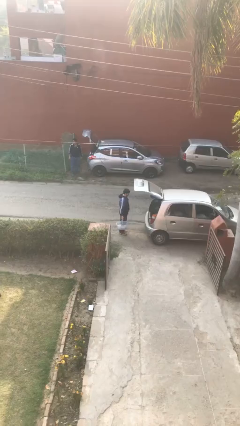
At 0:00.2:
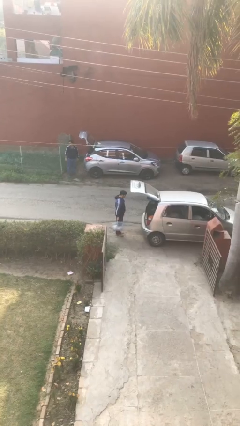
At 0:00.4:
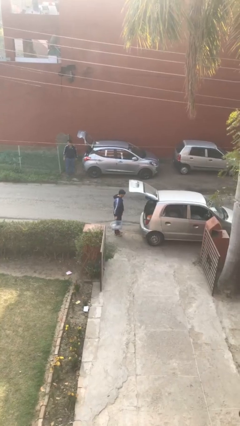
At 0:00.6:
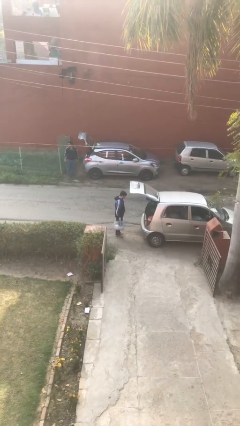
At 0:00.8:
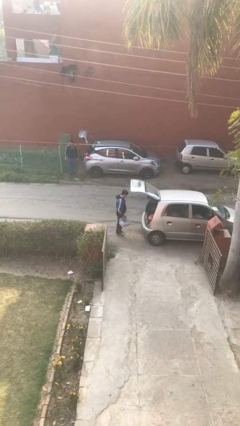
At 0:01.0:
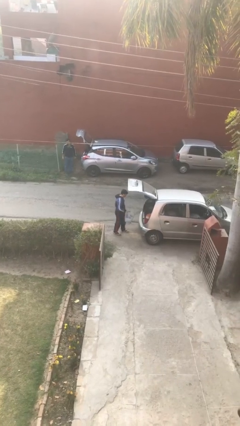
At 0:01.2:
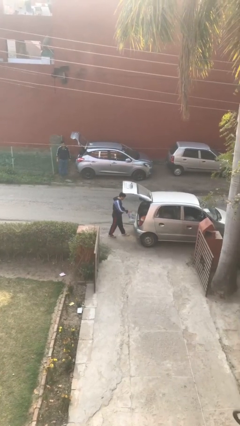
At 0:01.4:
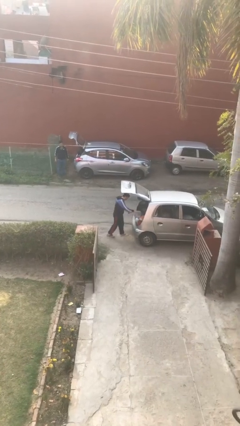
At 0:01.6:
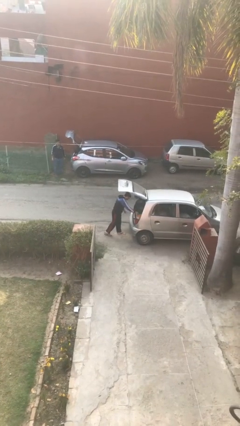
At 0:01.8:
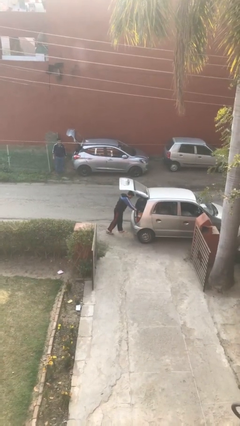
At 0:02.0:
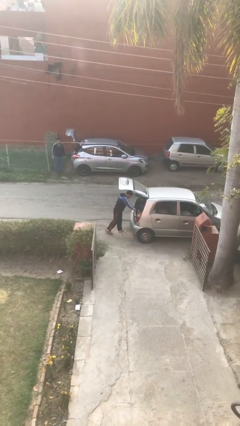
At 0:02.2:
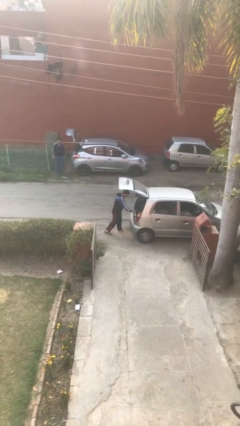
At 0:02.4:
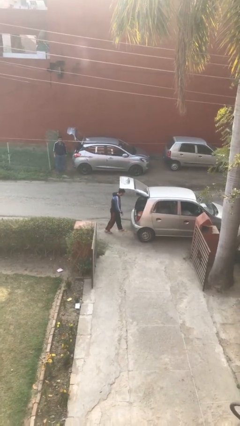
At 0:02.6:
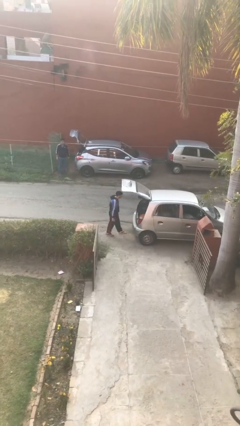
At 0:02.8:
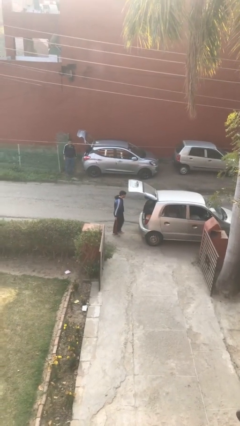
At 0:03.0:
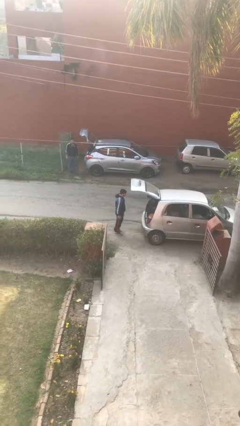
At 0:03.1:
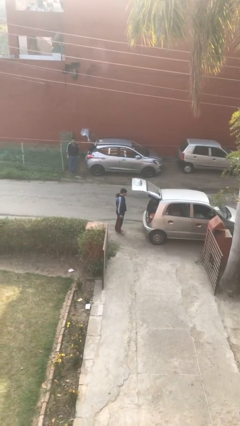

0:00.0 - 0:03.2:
person loads car

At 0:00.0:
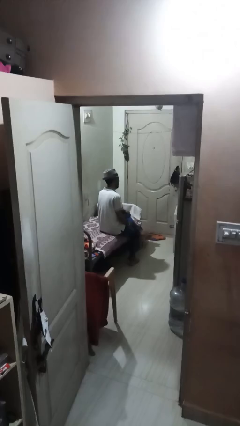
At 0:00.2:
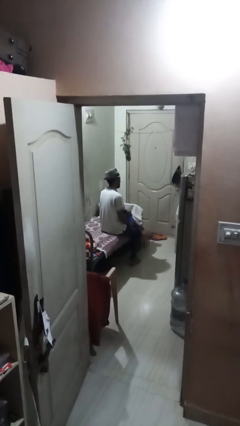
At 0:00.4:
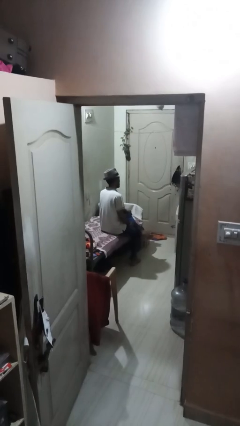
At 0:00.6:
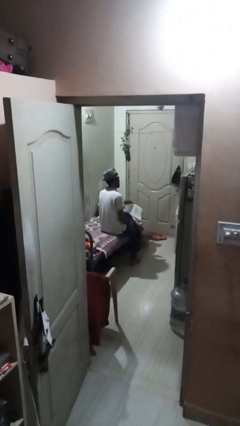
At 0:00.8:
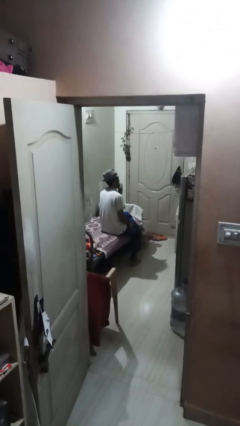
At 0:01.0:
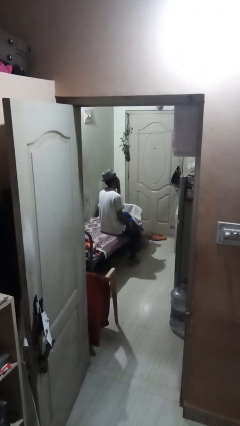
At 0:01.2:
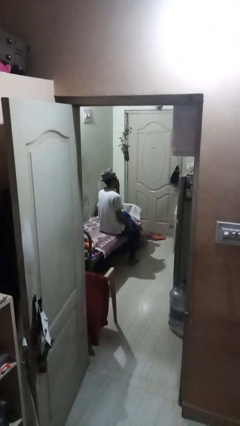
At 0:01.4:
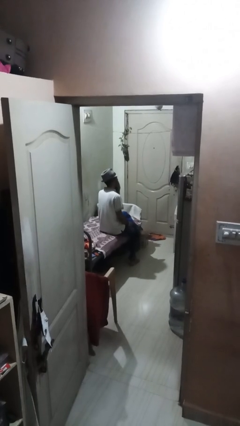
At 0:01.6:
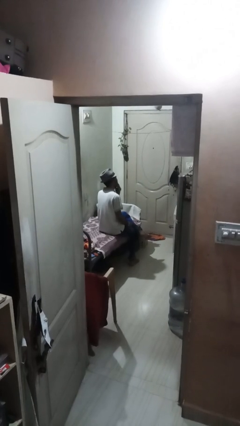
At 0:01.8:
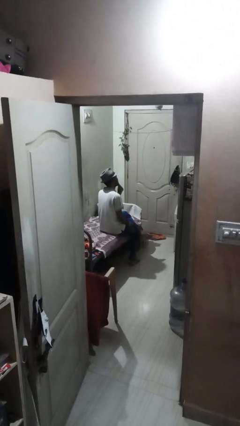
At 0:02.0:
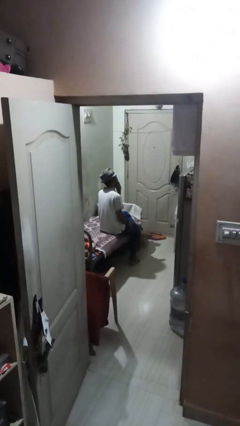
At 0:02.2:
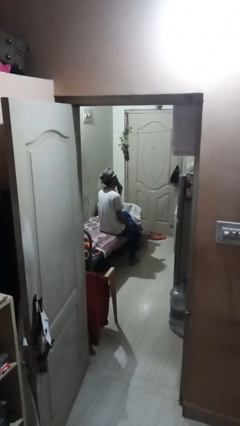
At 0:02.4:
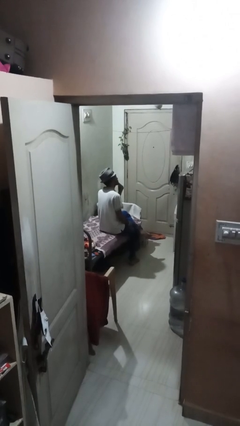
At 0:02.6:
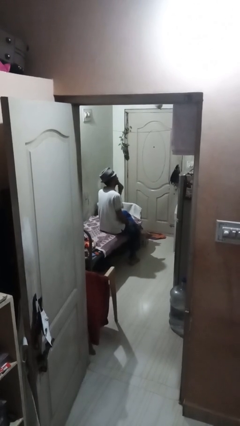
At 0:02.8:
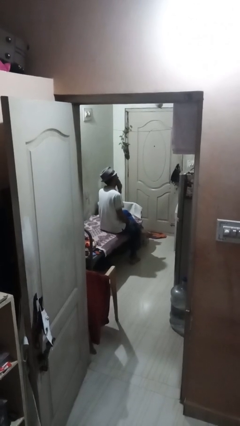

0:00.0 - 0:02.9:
person strokes chin

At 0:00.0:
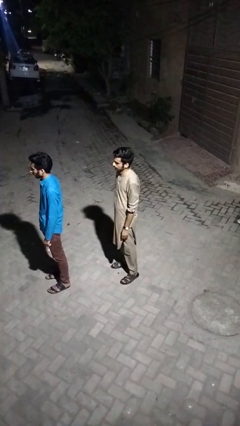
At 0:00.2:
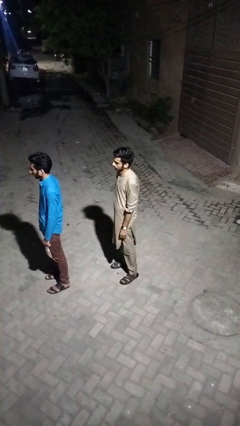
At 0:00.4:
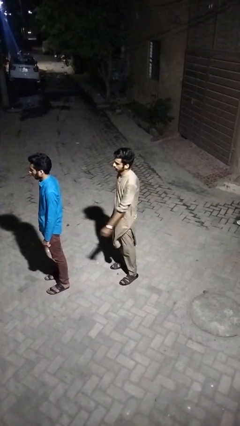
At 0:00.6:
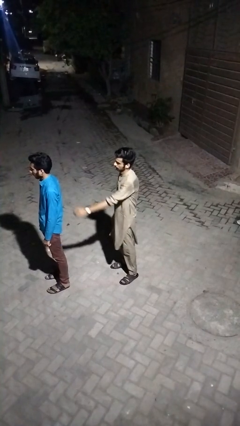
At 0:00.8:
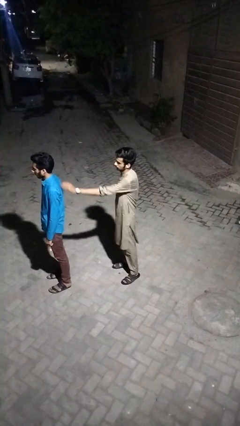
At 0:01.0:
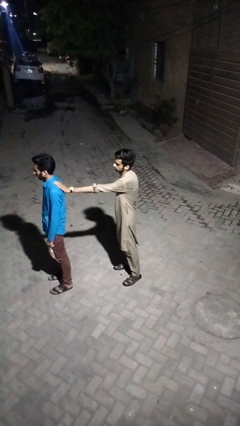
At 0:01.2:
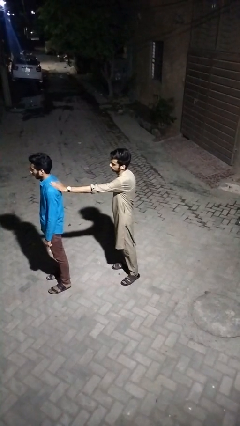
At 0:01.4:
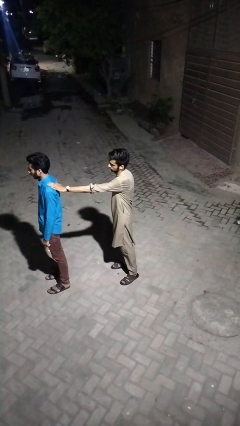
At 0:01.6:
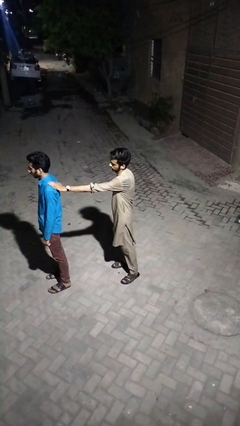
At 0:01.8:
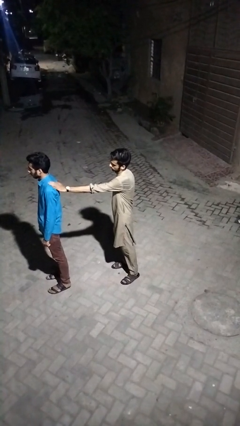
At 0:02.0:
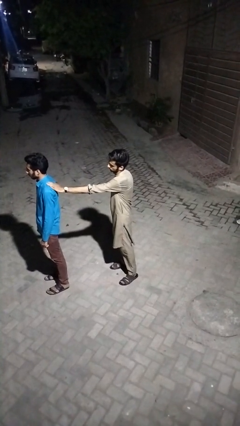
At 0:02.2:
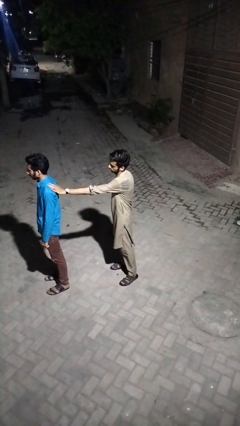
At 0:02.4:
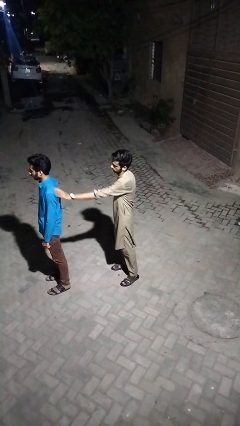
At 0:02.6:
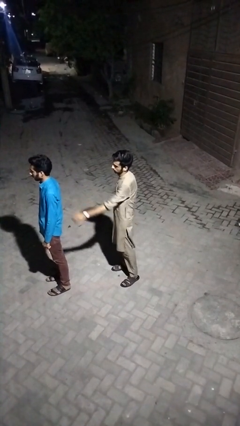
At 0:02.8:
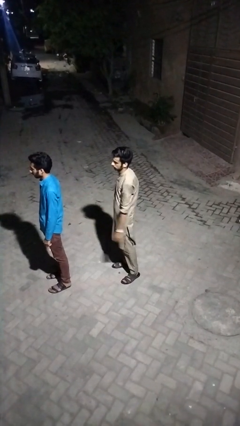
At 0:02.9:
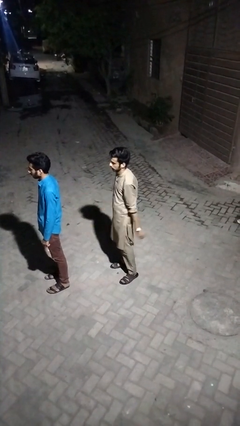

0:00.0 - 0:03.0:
person touches back of person

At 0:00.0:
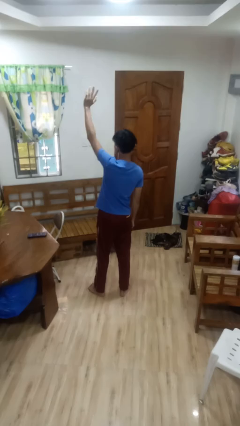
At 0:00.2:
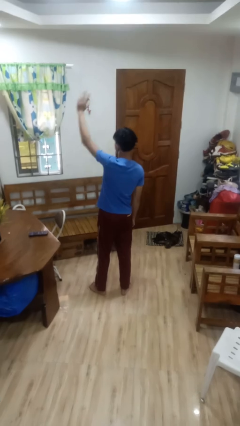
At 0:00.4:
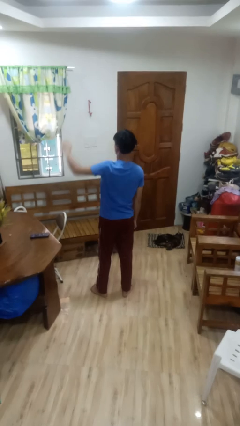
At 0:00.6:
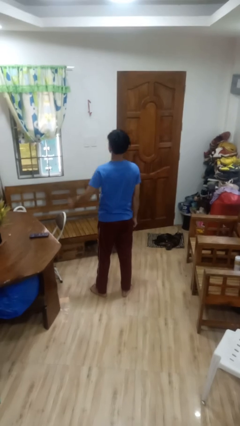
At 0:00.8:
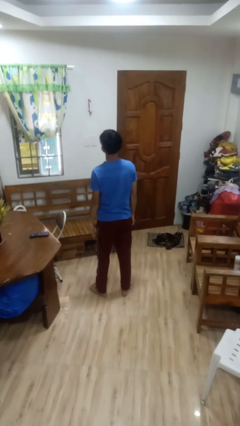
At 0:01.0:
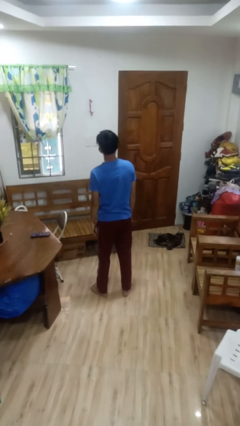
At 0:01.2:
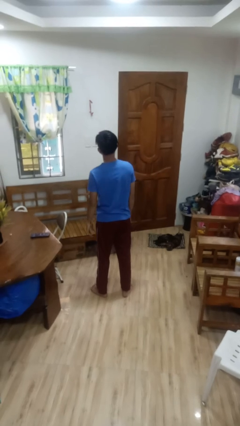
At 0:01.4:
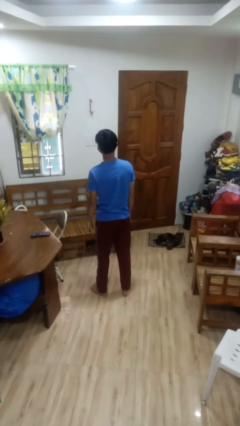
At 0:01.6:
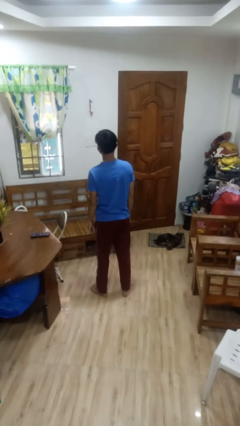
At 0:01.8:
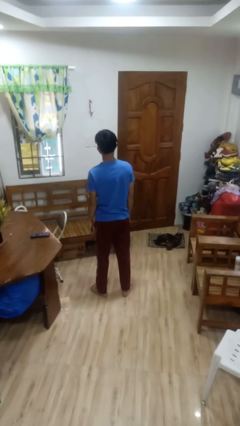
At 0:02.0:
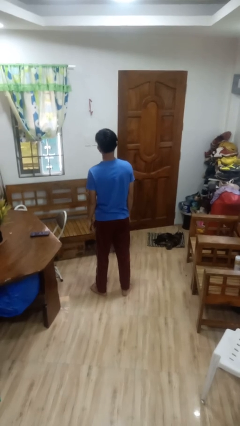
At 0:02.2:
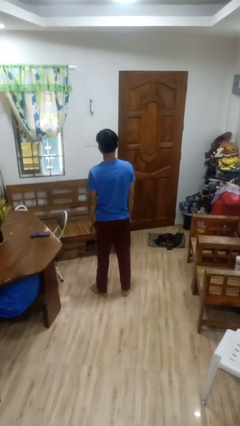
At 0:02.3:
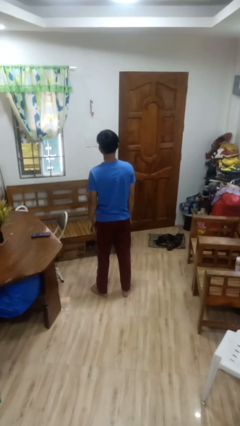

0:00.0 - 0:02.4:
person gestures lower hand

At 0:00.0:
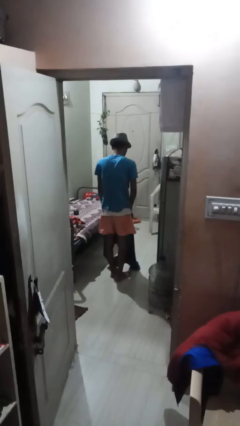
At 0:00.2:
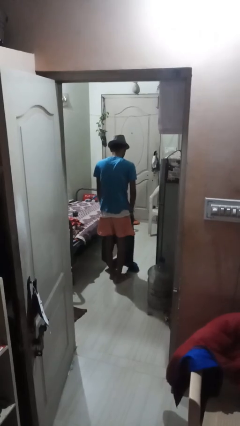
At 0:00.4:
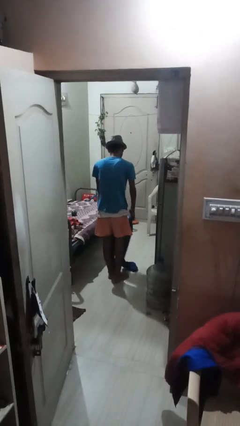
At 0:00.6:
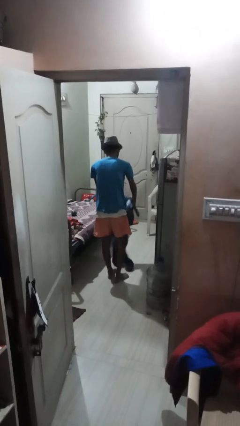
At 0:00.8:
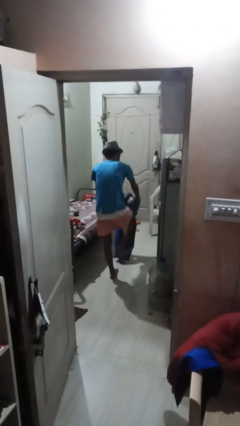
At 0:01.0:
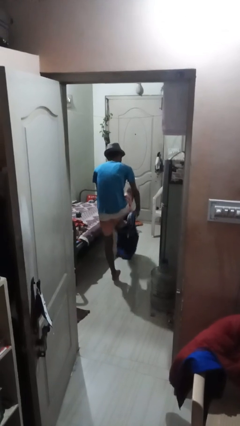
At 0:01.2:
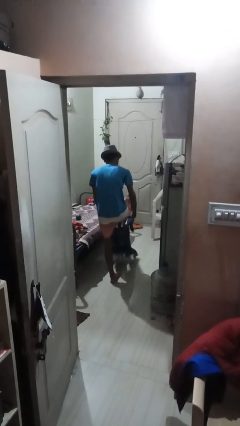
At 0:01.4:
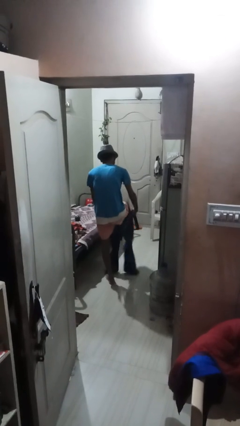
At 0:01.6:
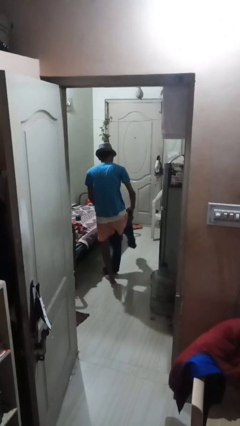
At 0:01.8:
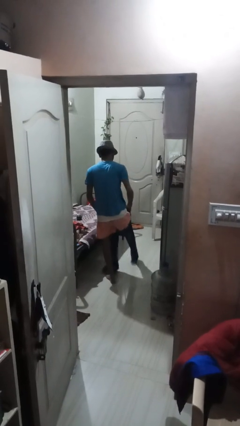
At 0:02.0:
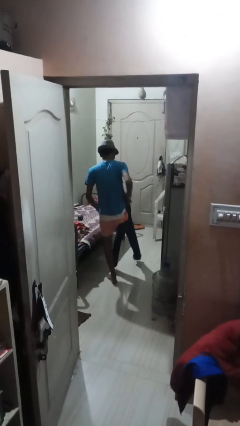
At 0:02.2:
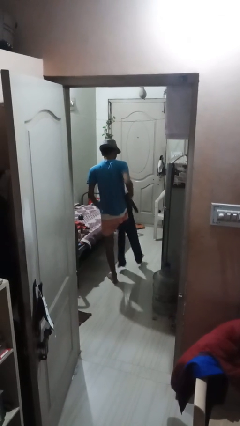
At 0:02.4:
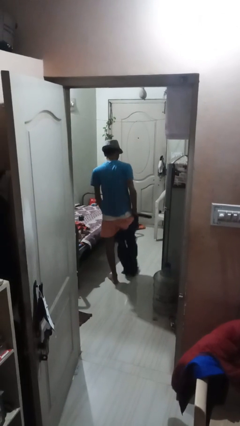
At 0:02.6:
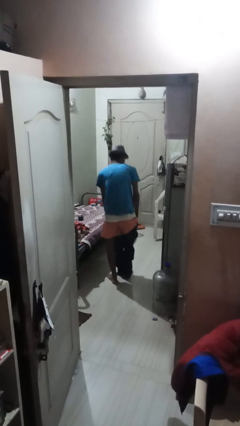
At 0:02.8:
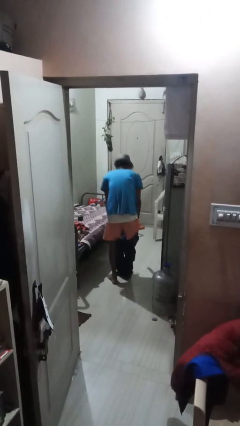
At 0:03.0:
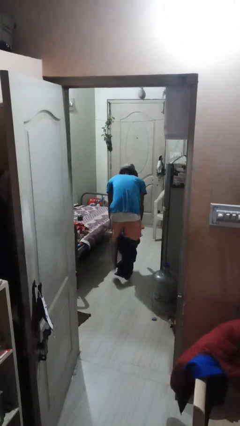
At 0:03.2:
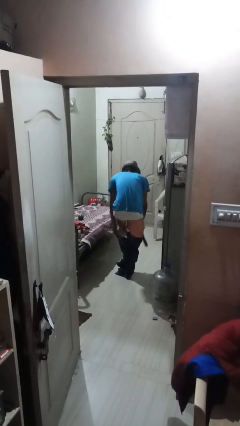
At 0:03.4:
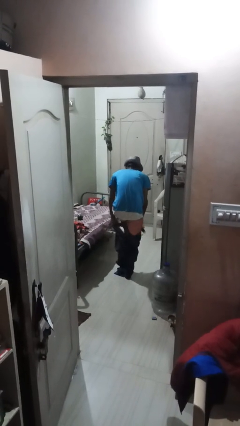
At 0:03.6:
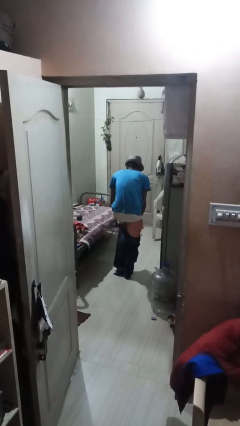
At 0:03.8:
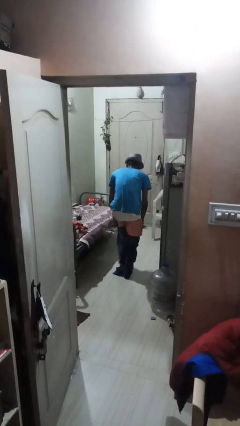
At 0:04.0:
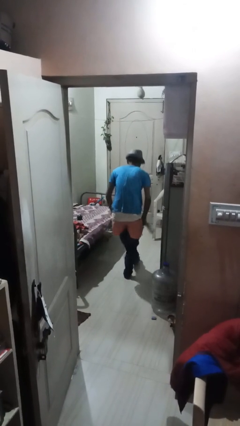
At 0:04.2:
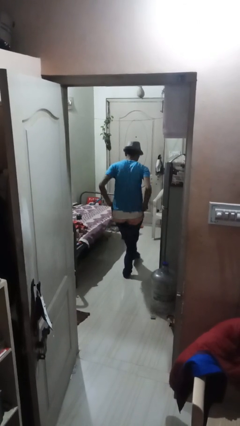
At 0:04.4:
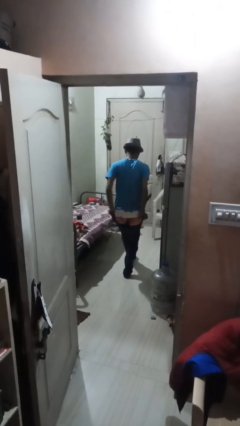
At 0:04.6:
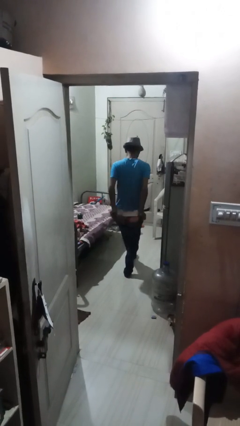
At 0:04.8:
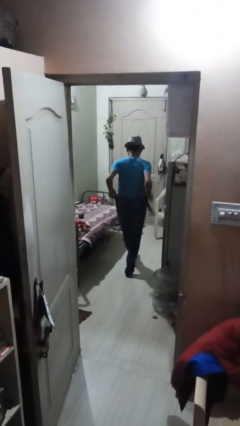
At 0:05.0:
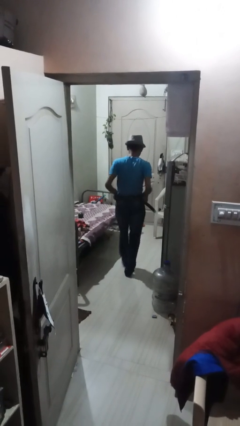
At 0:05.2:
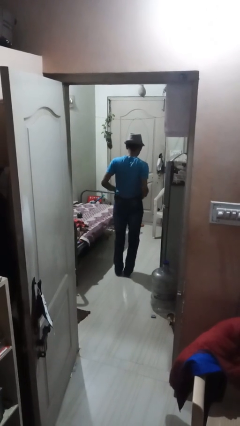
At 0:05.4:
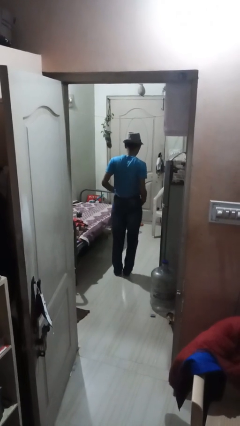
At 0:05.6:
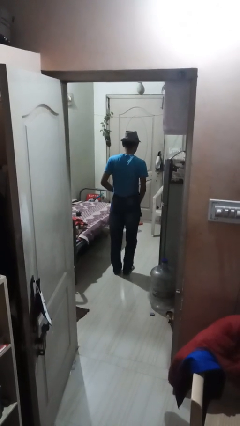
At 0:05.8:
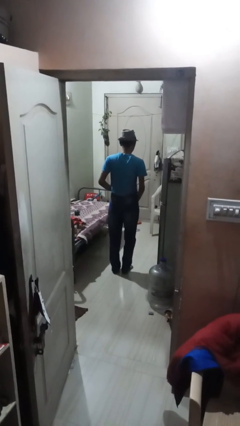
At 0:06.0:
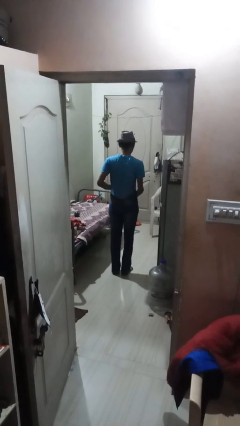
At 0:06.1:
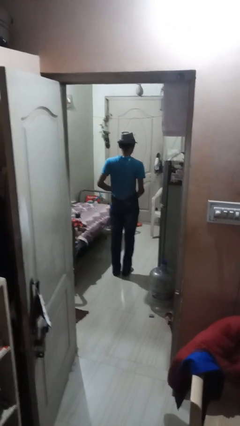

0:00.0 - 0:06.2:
person puts on pants
